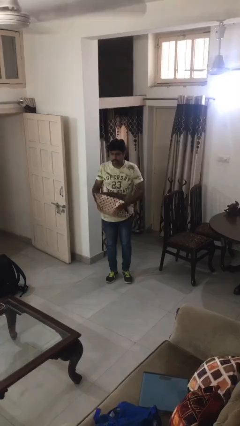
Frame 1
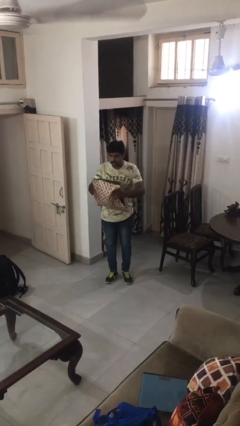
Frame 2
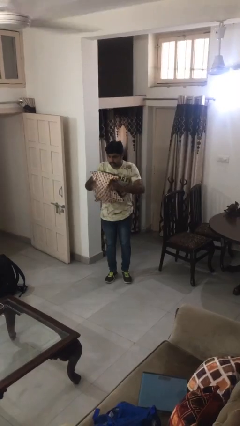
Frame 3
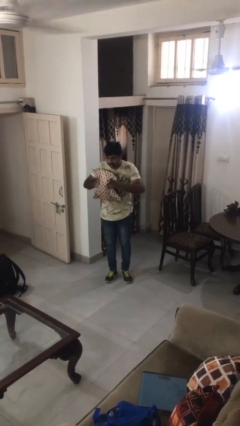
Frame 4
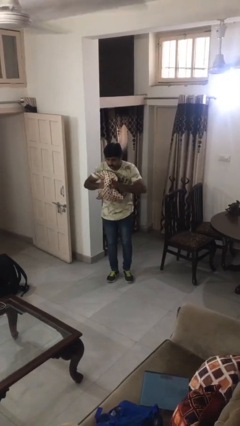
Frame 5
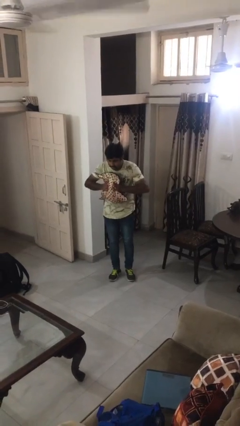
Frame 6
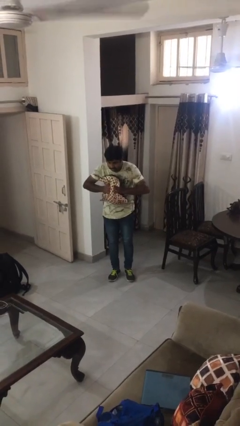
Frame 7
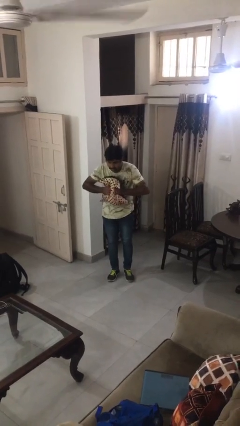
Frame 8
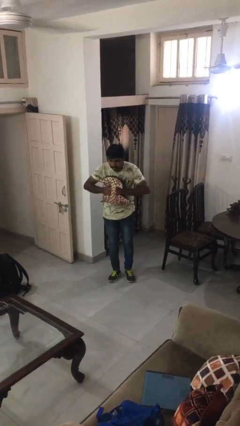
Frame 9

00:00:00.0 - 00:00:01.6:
person squeezes object

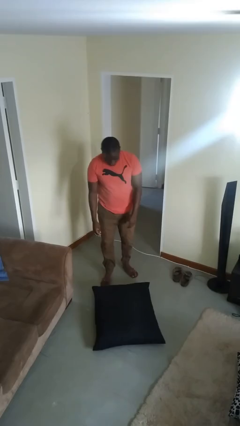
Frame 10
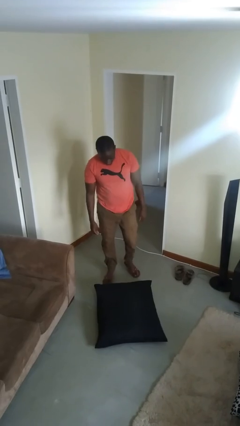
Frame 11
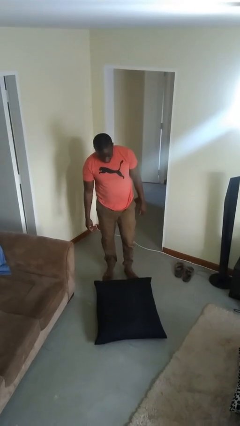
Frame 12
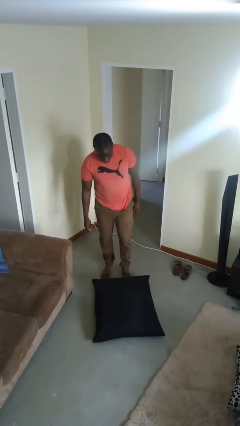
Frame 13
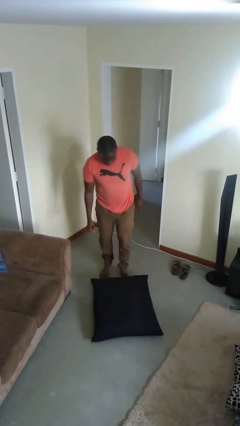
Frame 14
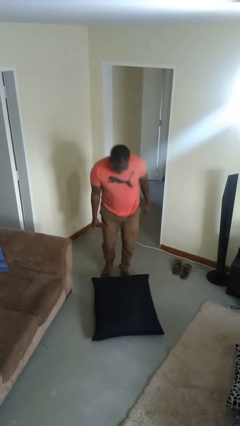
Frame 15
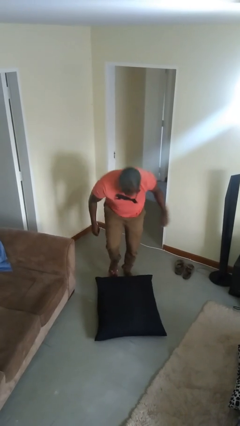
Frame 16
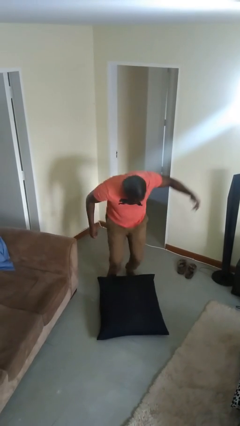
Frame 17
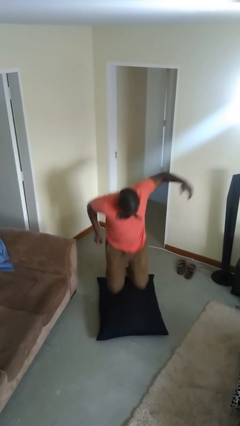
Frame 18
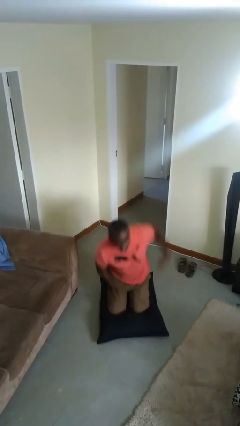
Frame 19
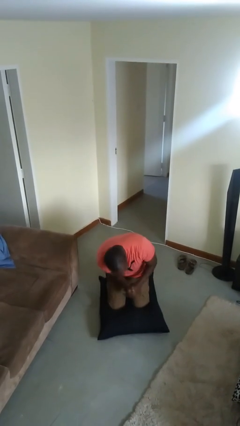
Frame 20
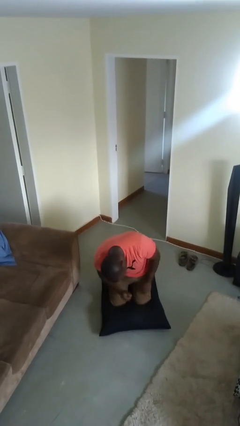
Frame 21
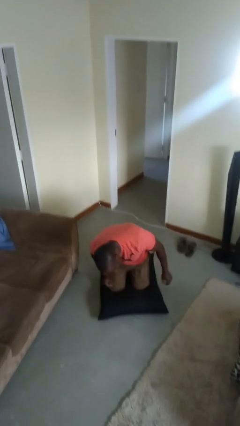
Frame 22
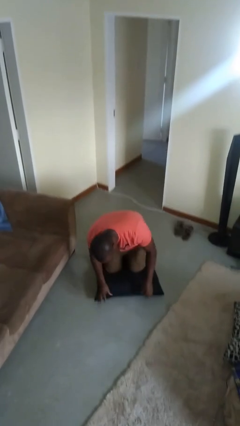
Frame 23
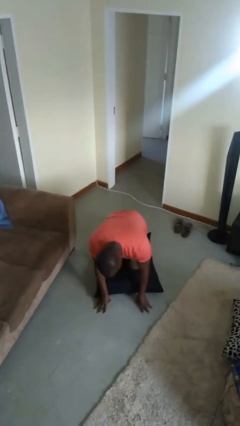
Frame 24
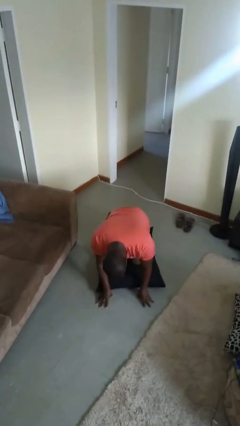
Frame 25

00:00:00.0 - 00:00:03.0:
person trips on object on floor

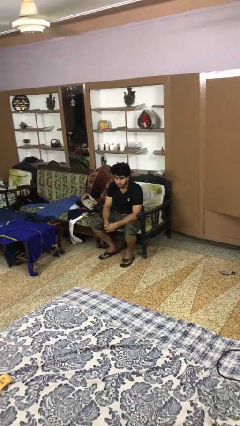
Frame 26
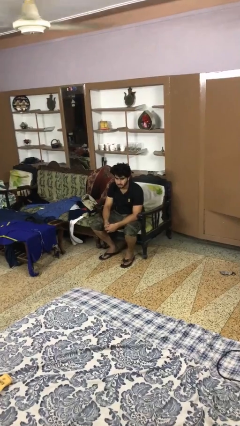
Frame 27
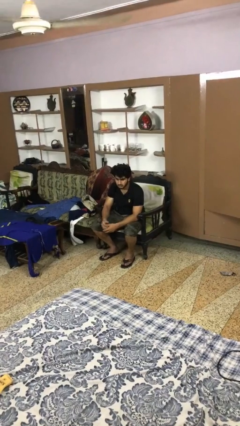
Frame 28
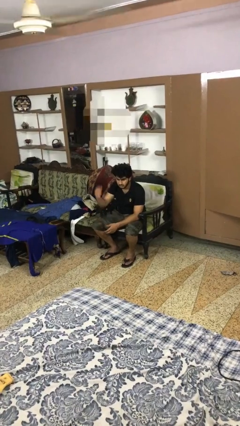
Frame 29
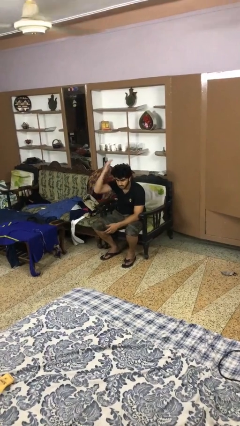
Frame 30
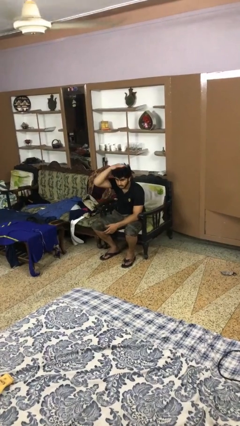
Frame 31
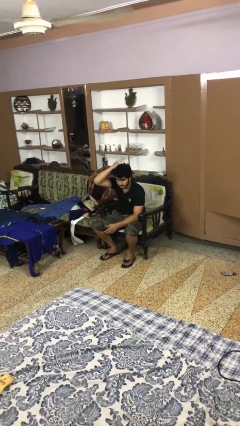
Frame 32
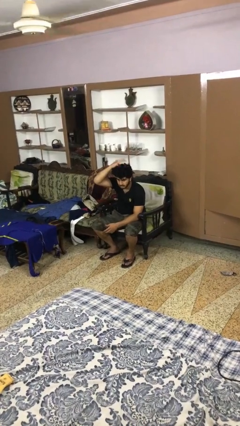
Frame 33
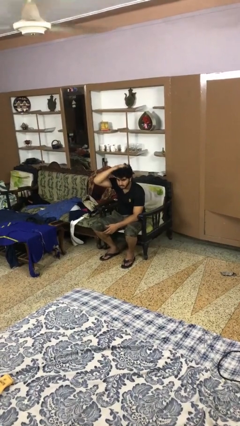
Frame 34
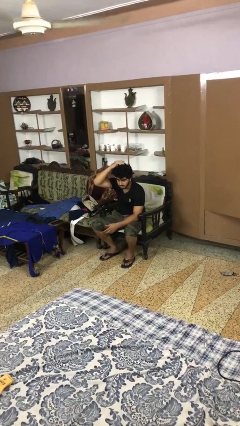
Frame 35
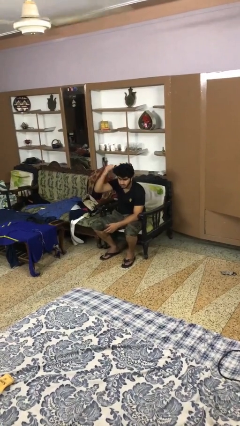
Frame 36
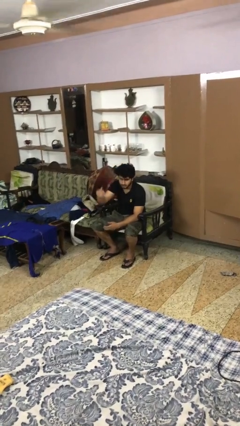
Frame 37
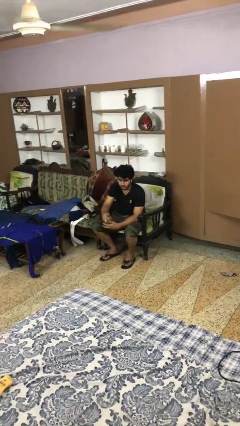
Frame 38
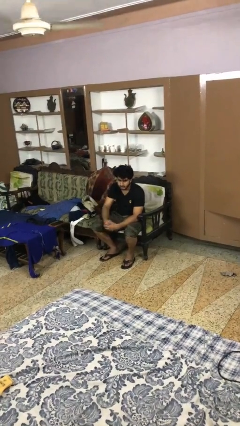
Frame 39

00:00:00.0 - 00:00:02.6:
person pats head

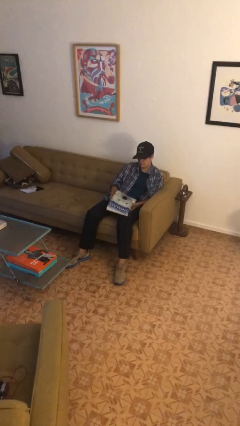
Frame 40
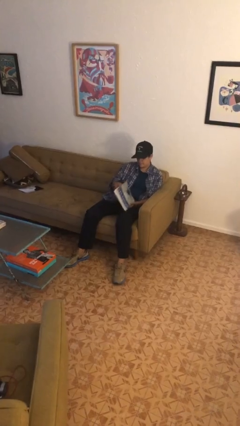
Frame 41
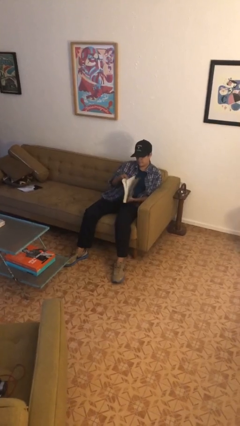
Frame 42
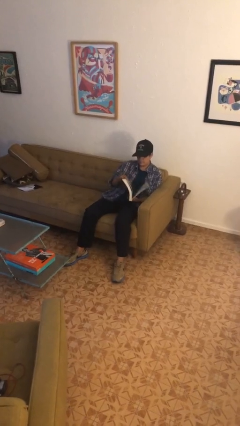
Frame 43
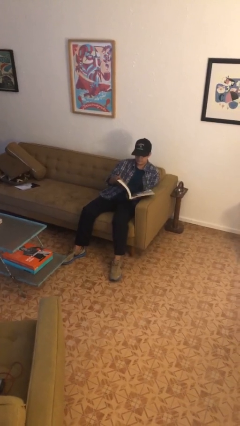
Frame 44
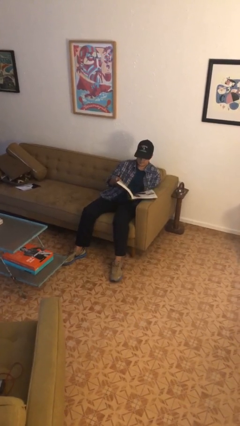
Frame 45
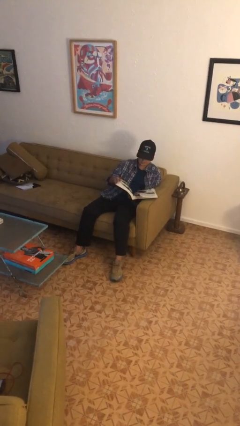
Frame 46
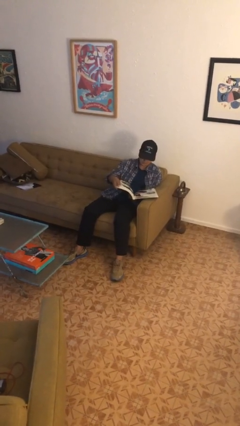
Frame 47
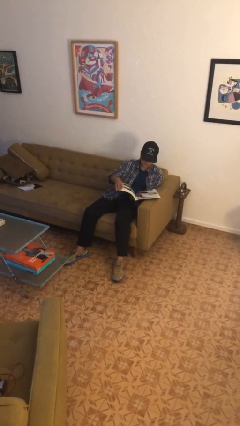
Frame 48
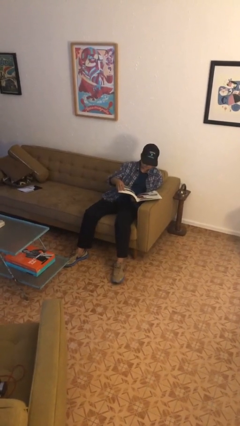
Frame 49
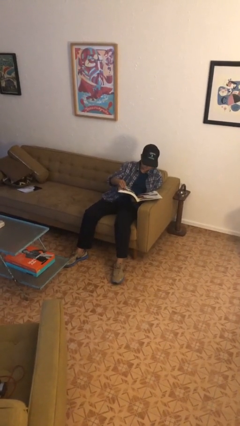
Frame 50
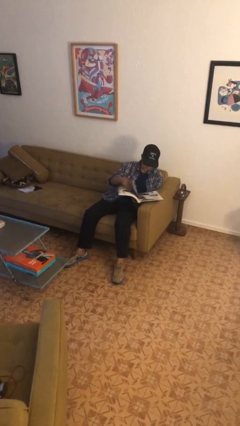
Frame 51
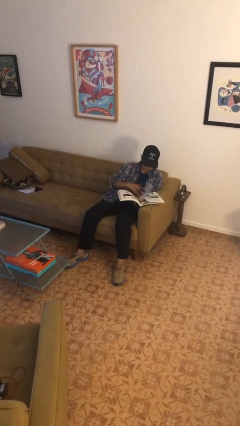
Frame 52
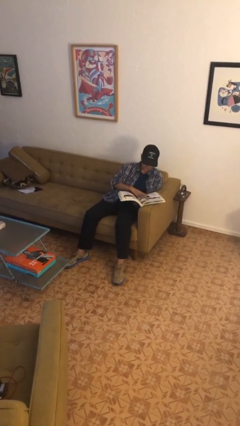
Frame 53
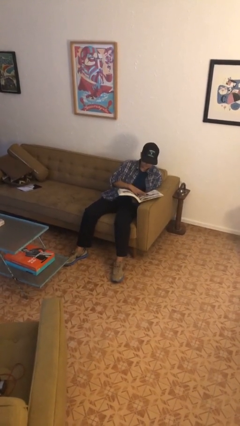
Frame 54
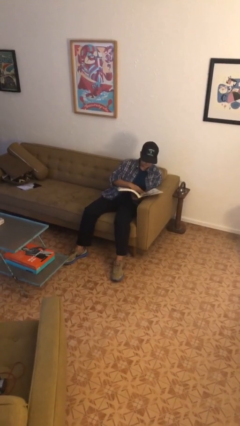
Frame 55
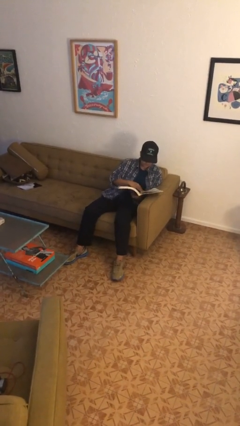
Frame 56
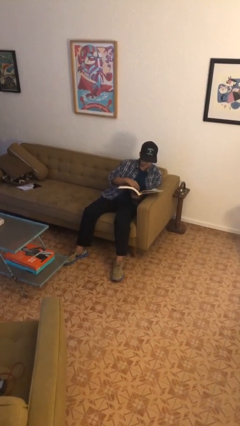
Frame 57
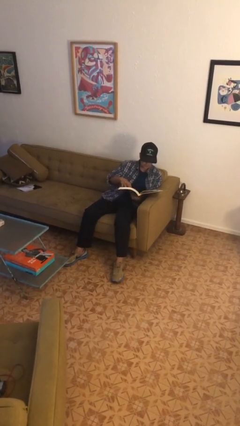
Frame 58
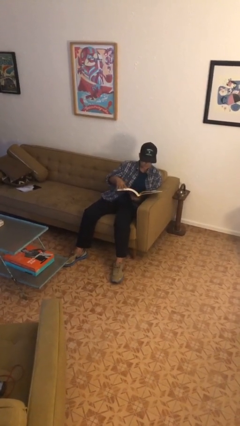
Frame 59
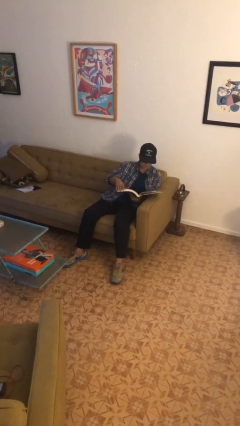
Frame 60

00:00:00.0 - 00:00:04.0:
person reads book

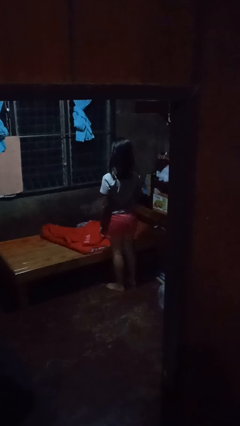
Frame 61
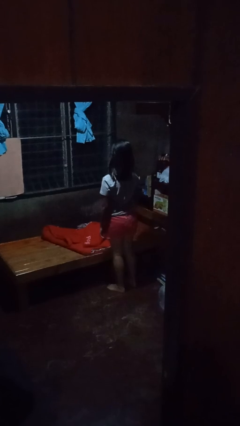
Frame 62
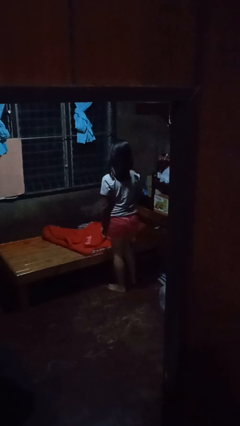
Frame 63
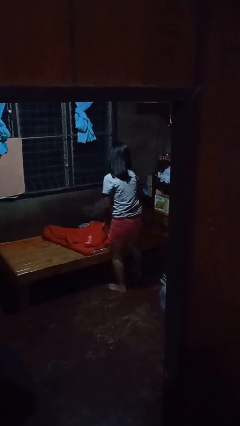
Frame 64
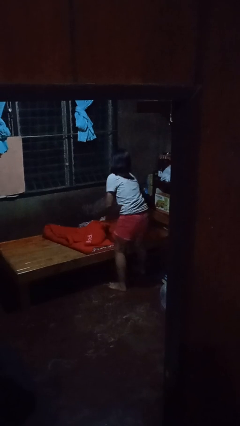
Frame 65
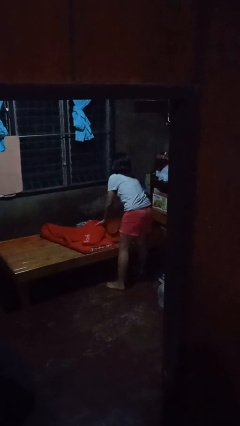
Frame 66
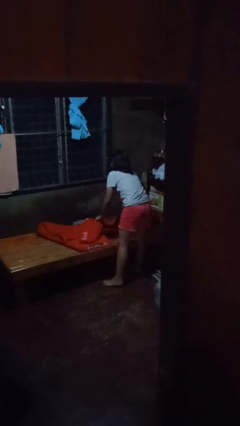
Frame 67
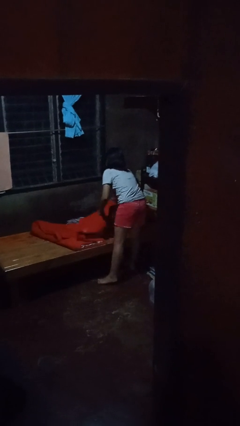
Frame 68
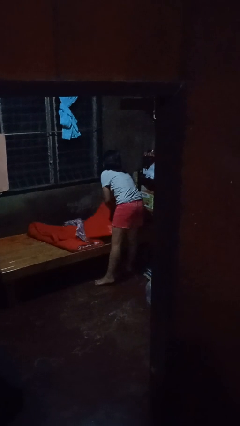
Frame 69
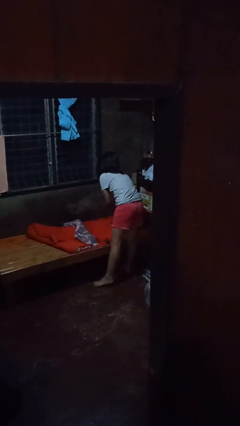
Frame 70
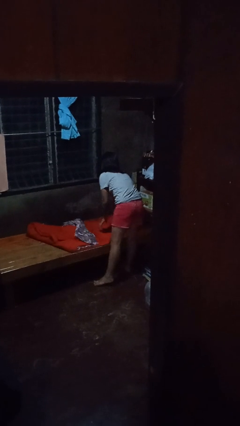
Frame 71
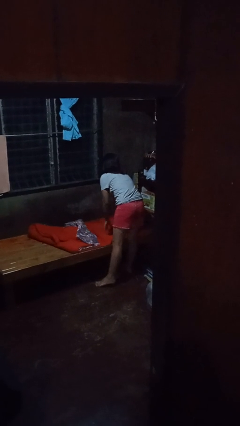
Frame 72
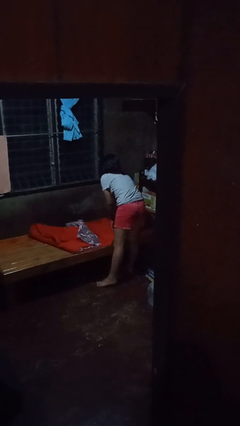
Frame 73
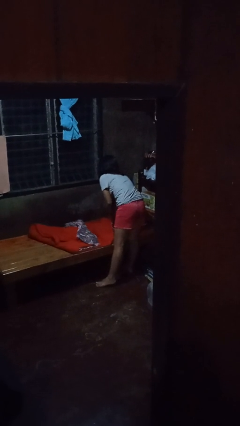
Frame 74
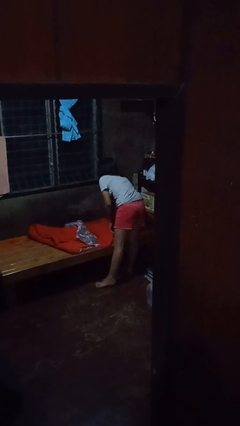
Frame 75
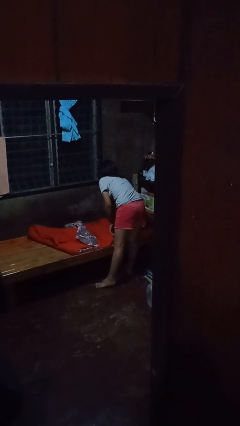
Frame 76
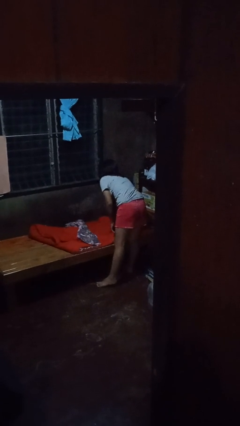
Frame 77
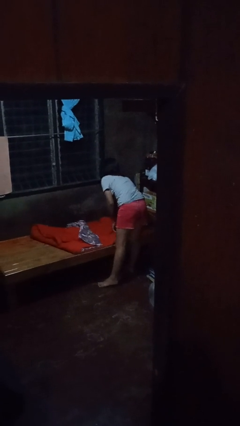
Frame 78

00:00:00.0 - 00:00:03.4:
person makes bed

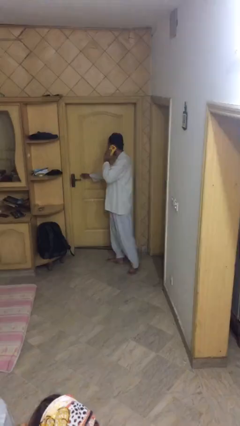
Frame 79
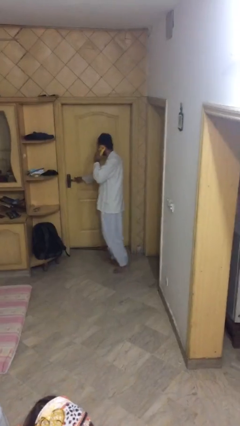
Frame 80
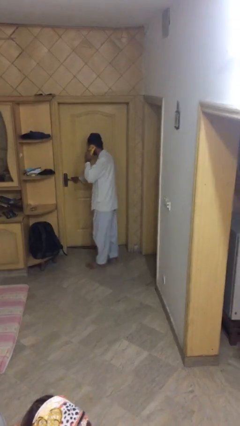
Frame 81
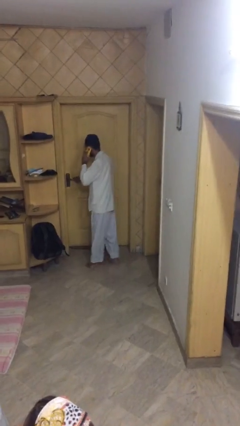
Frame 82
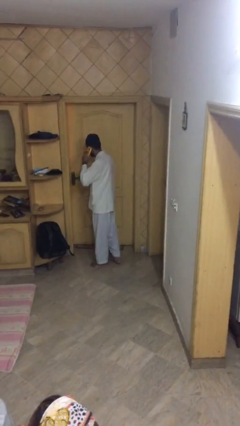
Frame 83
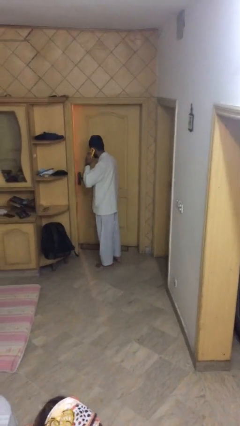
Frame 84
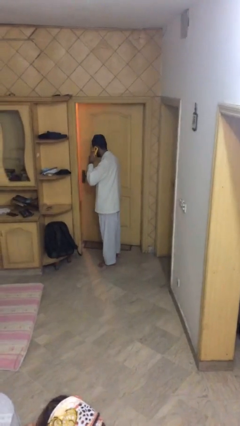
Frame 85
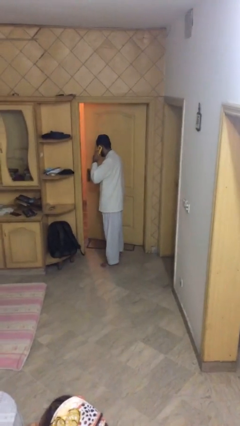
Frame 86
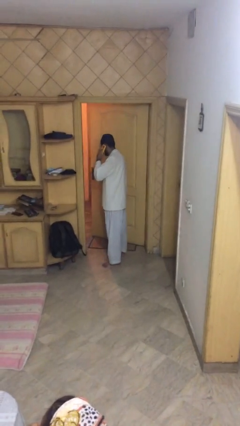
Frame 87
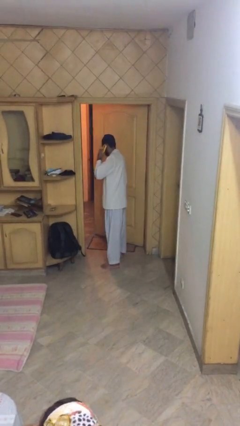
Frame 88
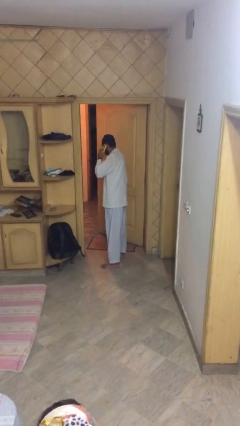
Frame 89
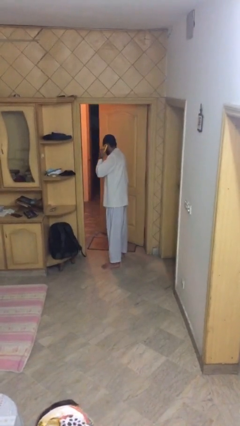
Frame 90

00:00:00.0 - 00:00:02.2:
person opens facility door
